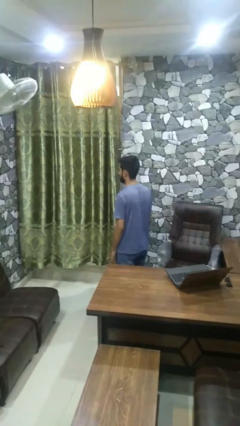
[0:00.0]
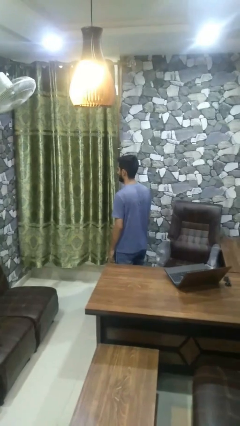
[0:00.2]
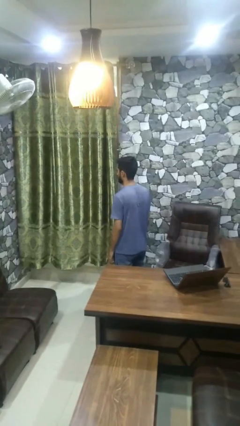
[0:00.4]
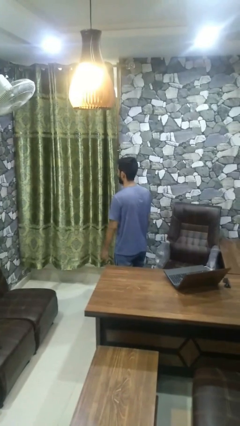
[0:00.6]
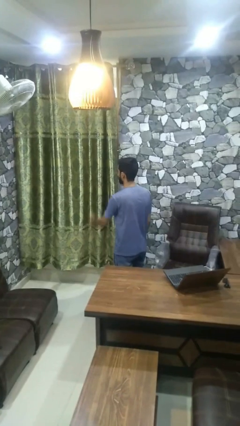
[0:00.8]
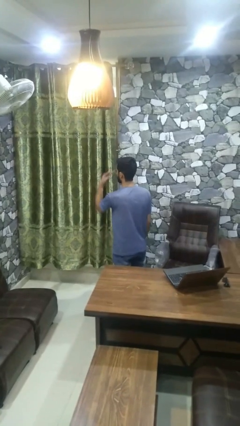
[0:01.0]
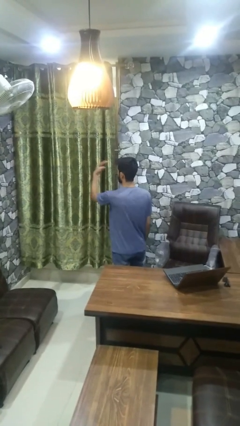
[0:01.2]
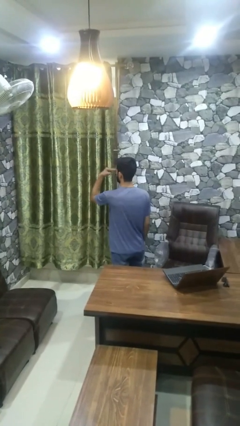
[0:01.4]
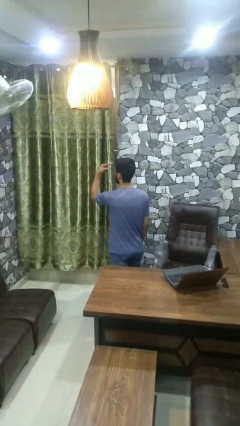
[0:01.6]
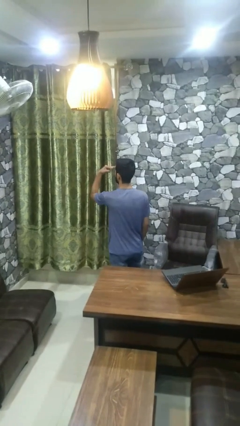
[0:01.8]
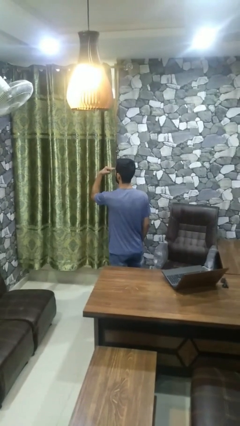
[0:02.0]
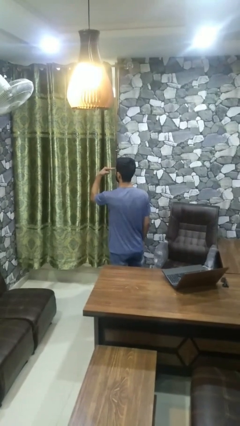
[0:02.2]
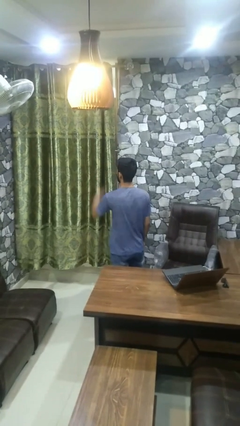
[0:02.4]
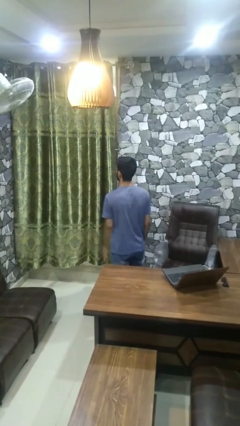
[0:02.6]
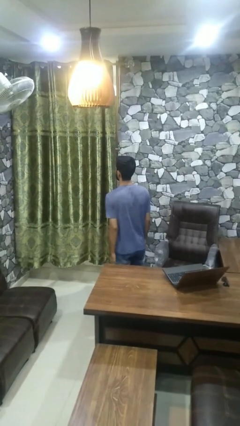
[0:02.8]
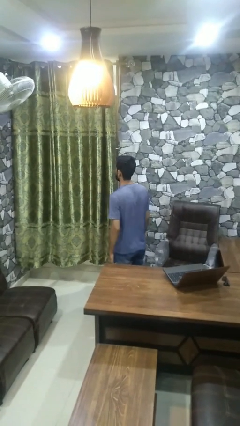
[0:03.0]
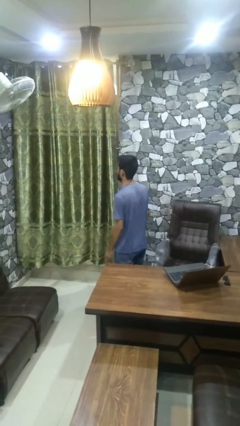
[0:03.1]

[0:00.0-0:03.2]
person gestures watch closely

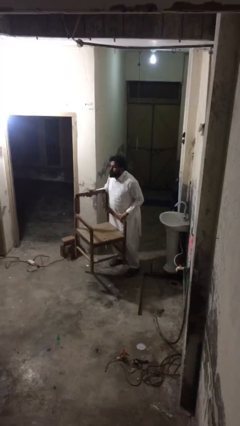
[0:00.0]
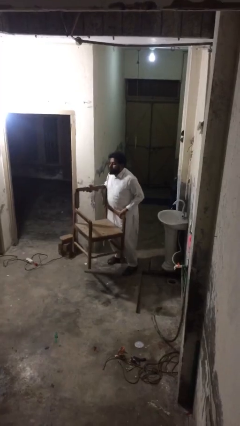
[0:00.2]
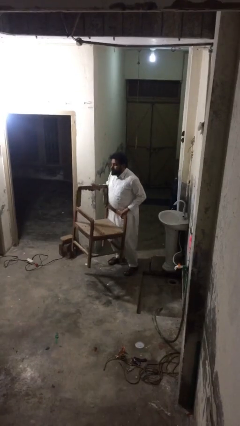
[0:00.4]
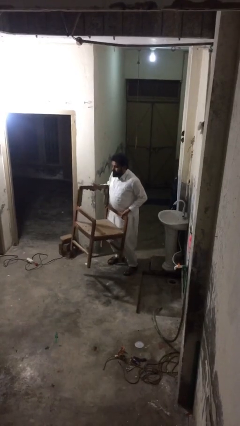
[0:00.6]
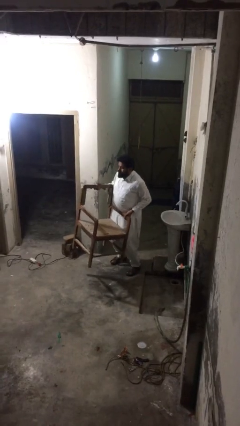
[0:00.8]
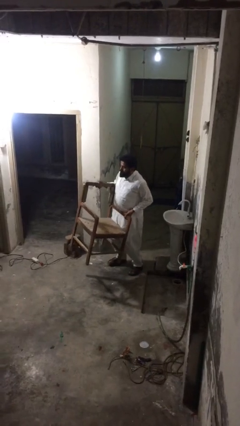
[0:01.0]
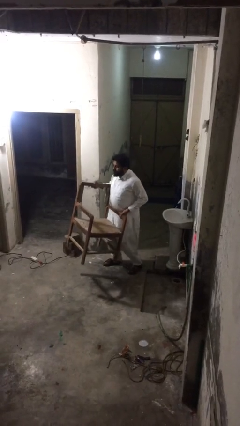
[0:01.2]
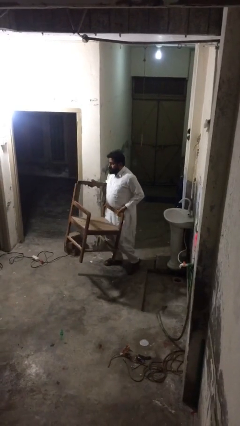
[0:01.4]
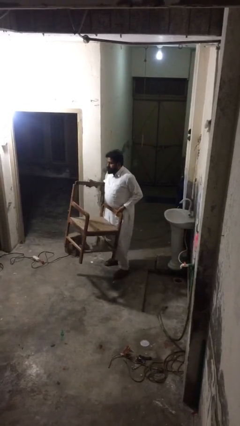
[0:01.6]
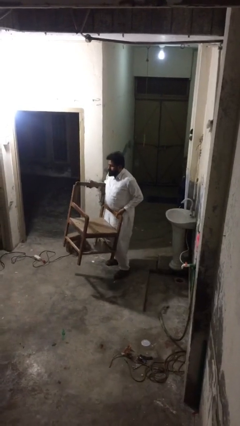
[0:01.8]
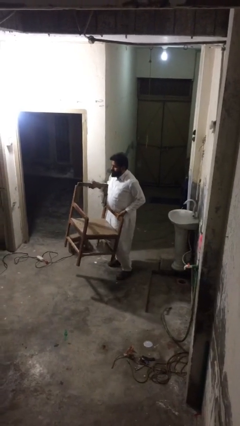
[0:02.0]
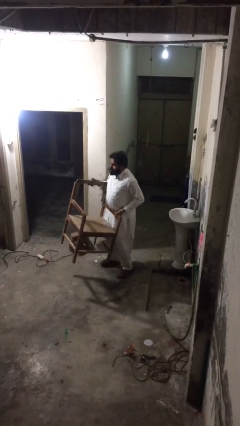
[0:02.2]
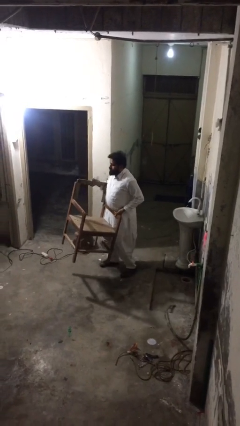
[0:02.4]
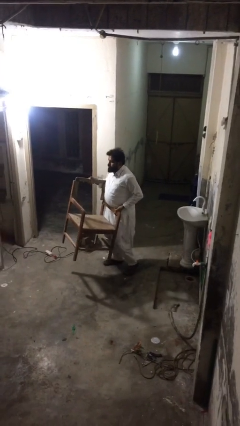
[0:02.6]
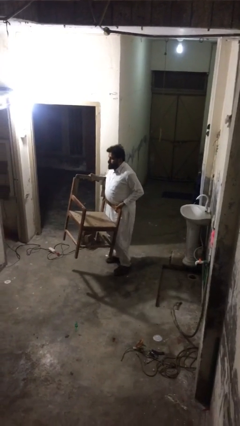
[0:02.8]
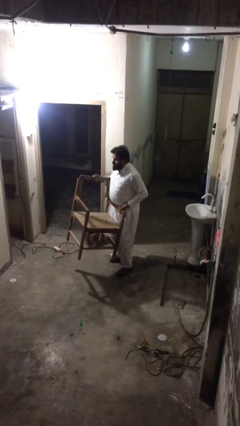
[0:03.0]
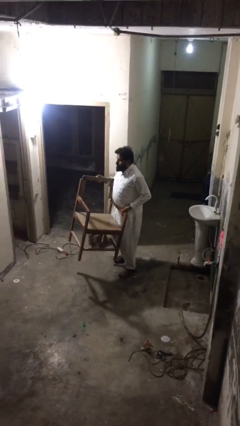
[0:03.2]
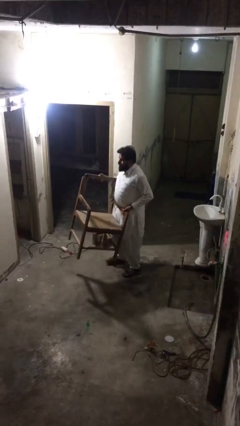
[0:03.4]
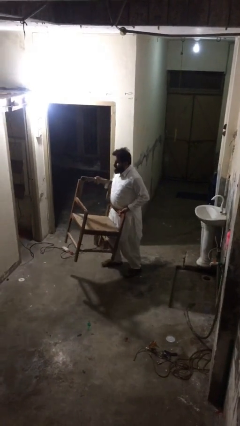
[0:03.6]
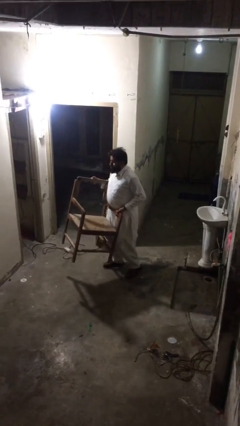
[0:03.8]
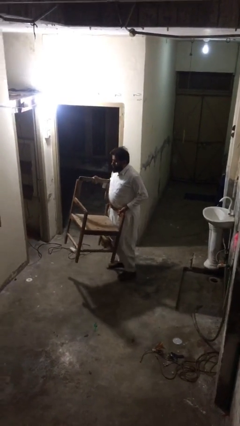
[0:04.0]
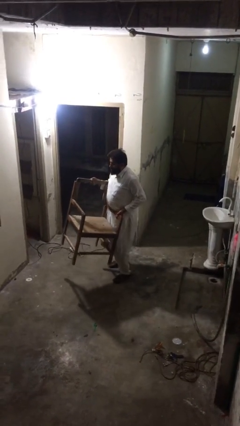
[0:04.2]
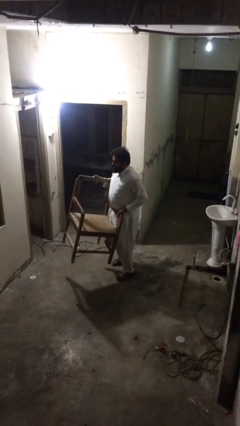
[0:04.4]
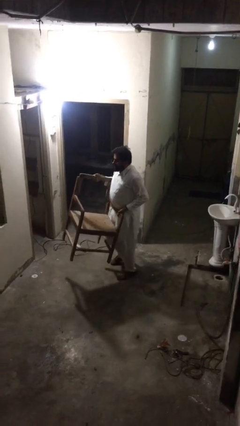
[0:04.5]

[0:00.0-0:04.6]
person carries heavy object

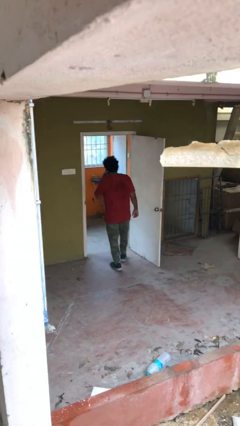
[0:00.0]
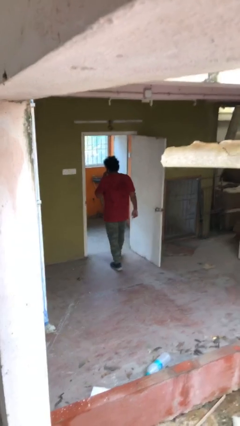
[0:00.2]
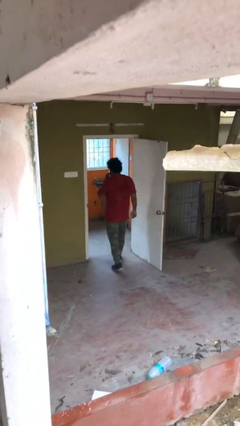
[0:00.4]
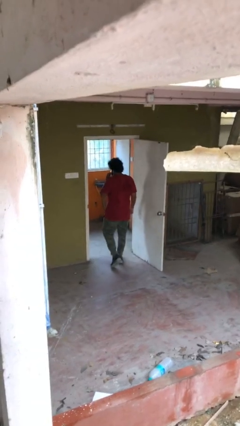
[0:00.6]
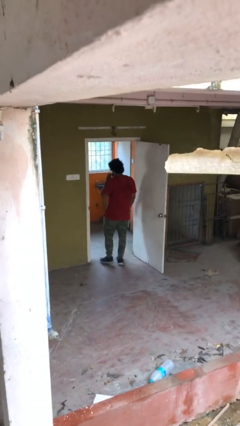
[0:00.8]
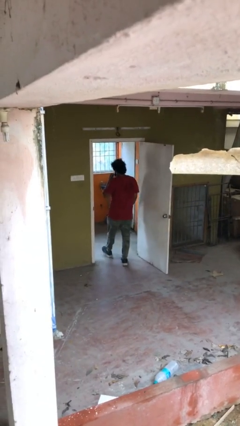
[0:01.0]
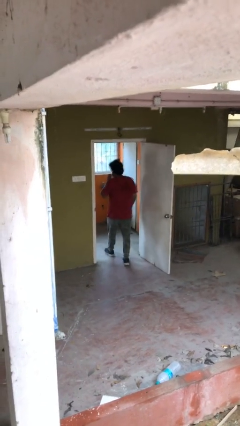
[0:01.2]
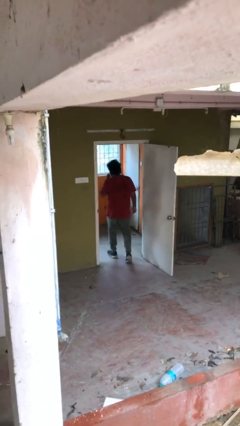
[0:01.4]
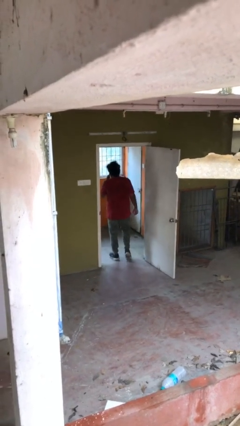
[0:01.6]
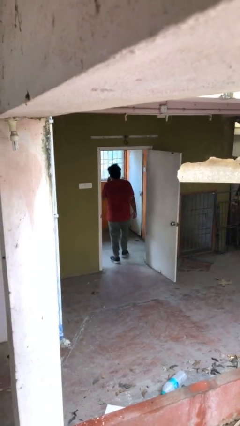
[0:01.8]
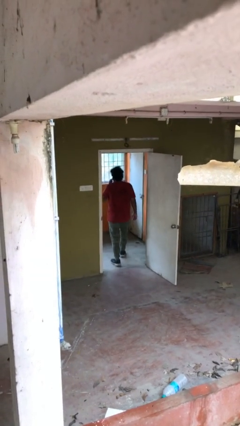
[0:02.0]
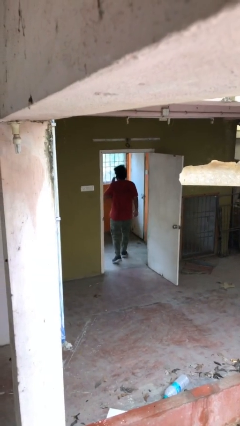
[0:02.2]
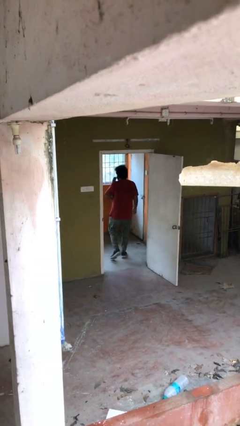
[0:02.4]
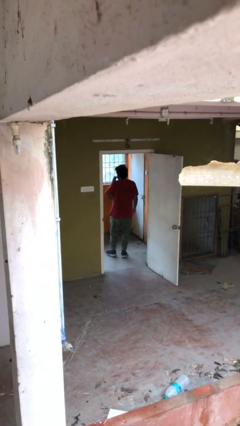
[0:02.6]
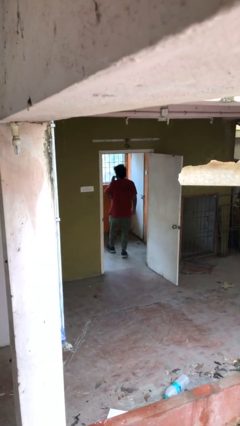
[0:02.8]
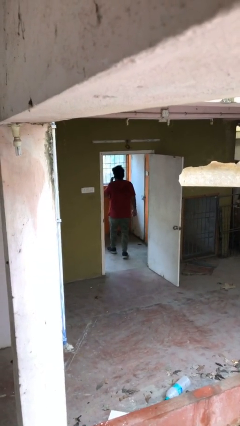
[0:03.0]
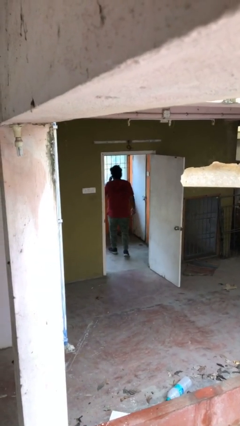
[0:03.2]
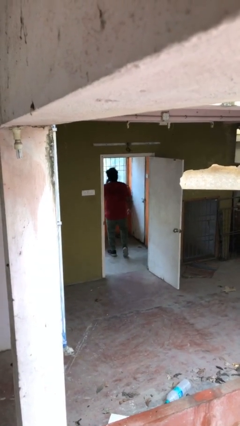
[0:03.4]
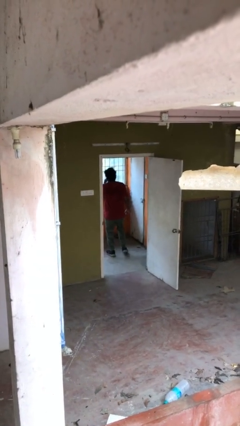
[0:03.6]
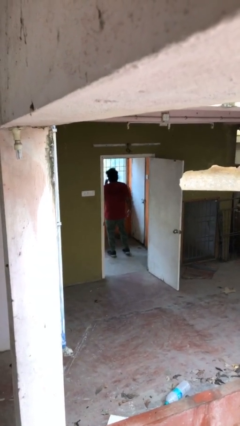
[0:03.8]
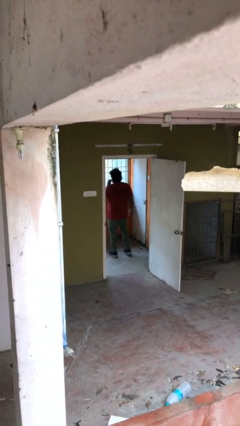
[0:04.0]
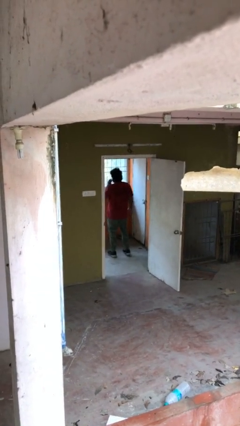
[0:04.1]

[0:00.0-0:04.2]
person exits scene through structure

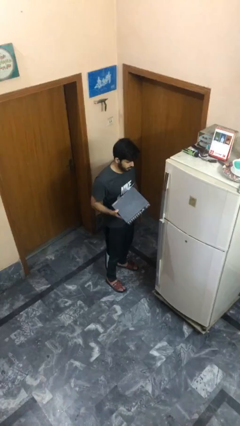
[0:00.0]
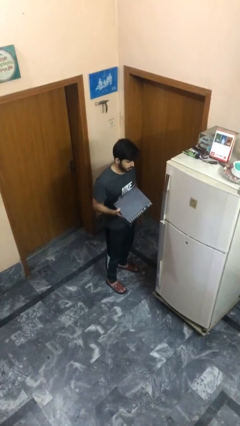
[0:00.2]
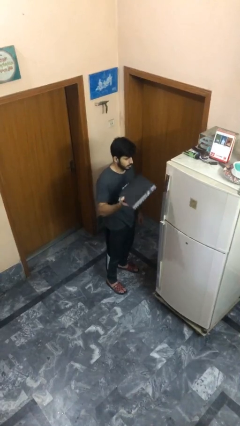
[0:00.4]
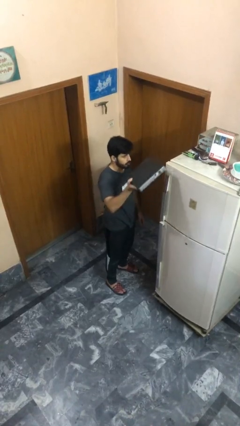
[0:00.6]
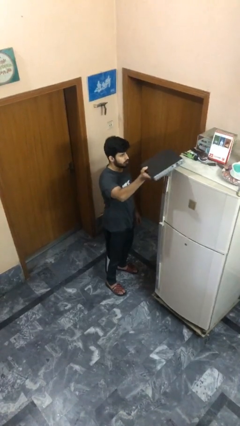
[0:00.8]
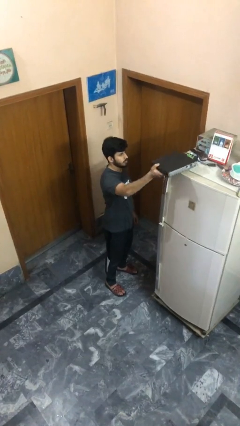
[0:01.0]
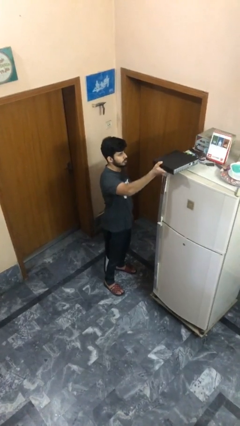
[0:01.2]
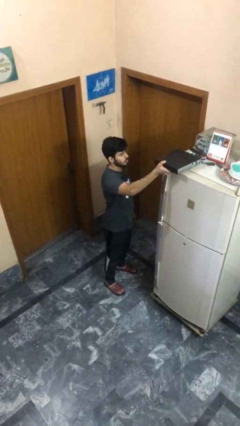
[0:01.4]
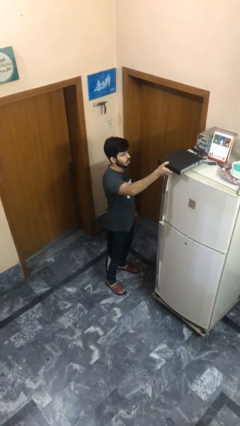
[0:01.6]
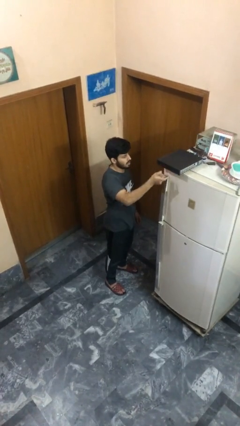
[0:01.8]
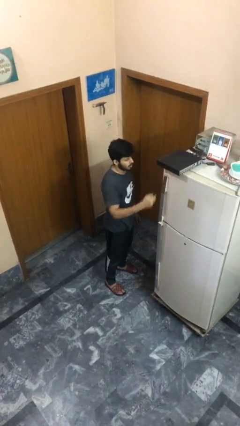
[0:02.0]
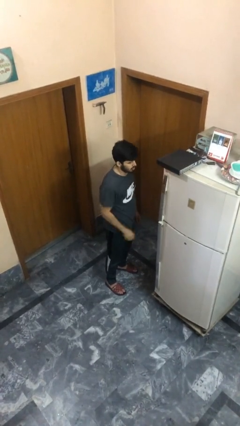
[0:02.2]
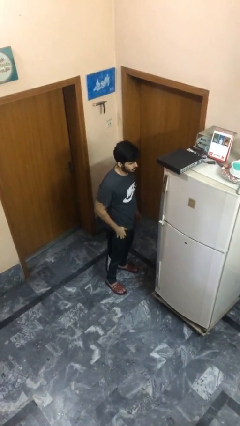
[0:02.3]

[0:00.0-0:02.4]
person puts down object on countertop

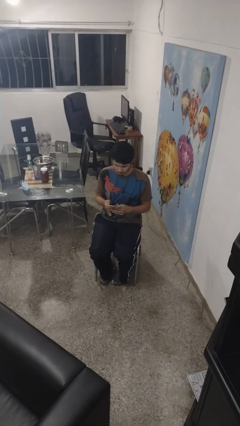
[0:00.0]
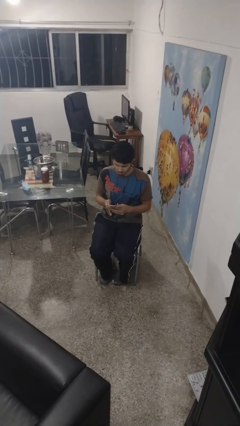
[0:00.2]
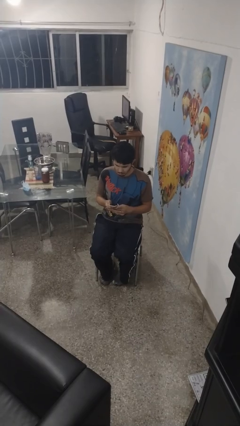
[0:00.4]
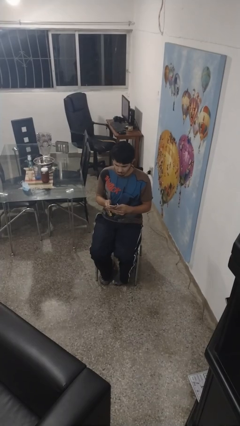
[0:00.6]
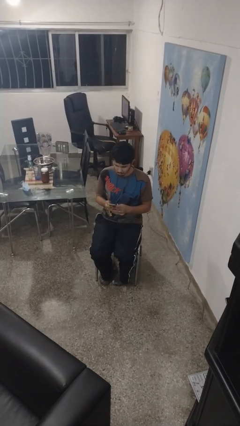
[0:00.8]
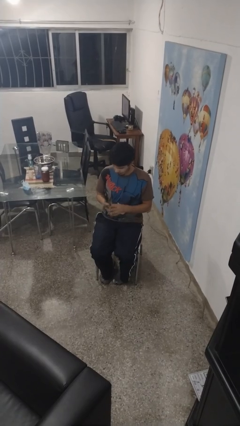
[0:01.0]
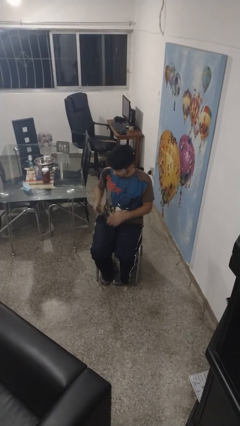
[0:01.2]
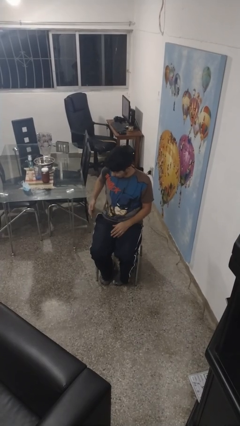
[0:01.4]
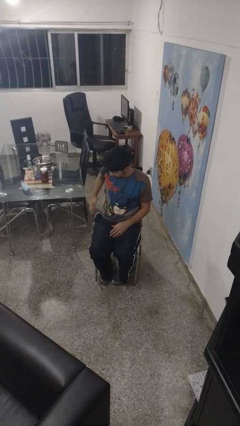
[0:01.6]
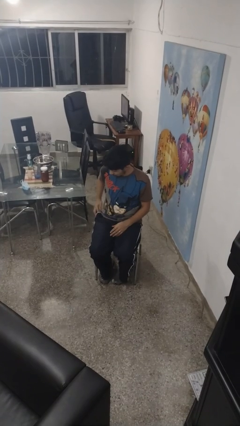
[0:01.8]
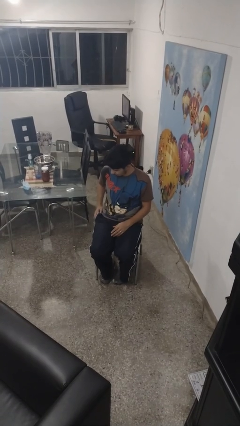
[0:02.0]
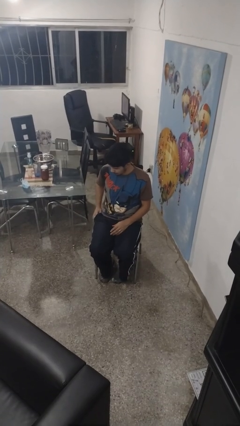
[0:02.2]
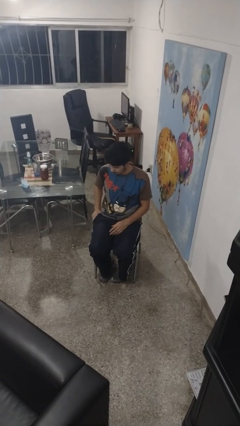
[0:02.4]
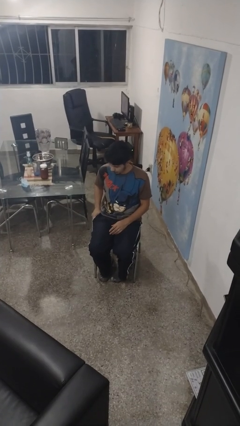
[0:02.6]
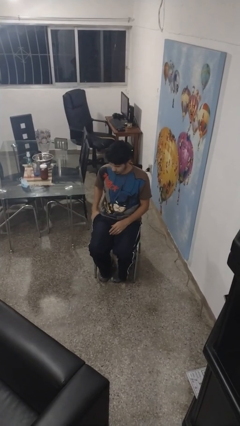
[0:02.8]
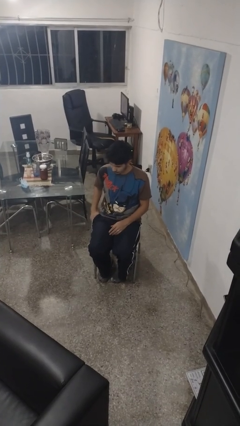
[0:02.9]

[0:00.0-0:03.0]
person puts phone into pocket
